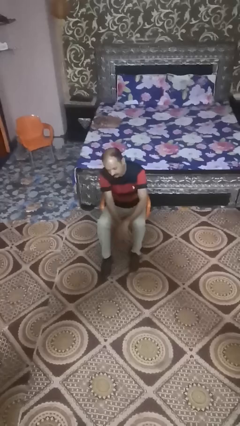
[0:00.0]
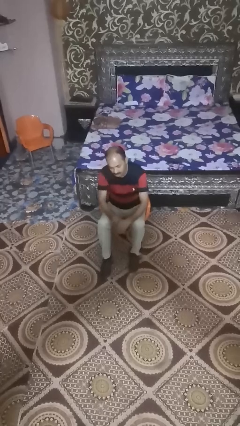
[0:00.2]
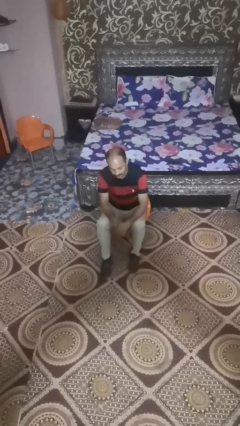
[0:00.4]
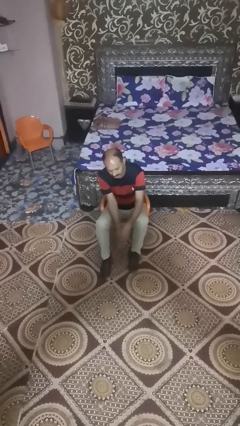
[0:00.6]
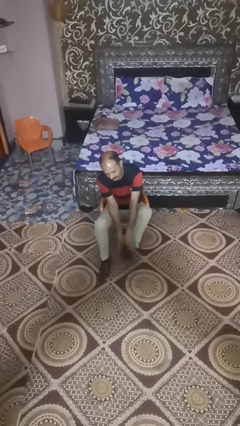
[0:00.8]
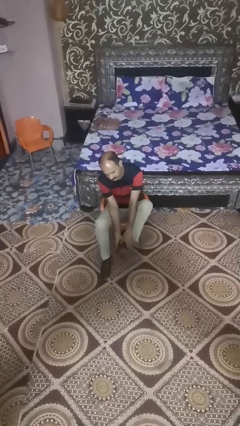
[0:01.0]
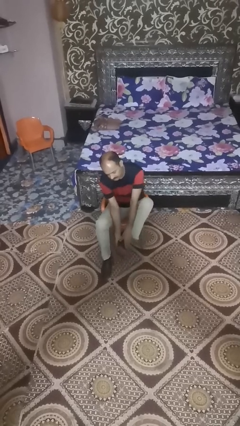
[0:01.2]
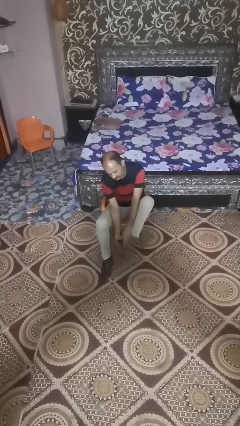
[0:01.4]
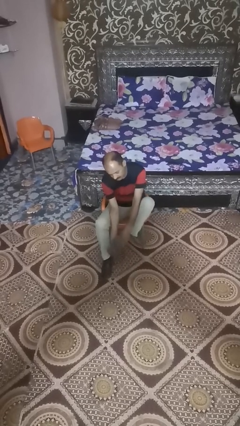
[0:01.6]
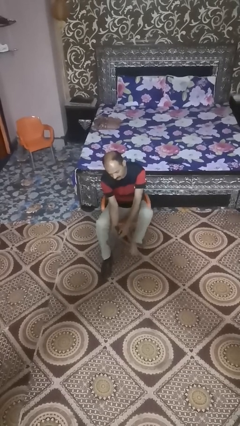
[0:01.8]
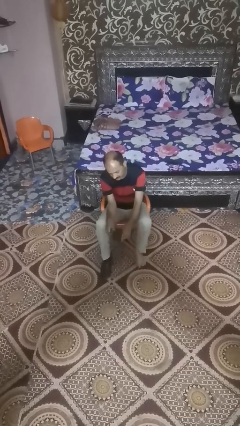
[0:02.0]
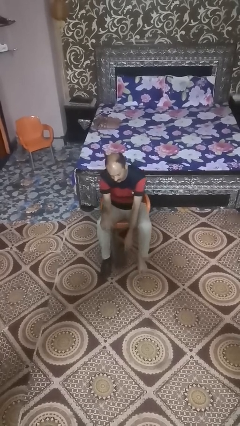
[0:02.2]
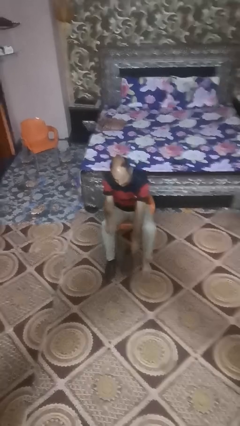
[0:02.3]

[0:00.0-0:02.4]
person takes off boots

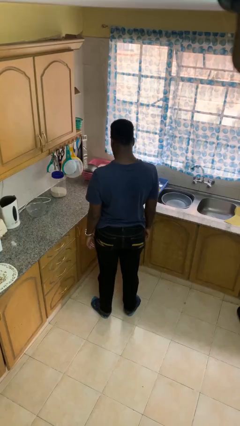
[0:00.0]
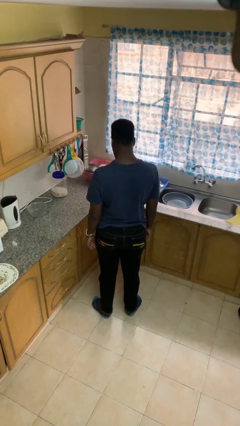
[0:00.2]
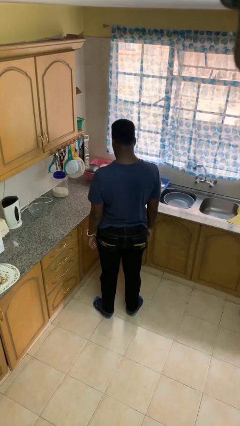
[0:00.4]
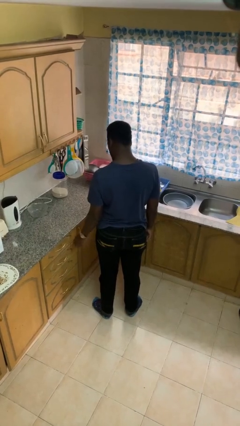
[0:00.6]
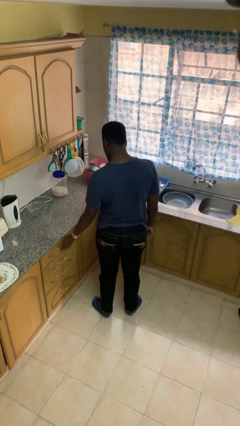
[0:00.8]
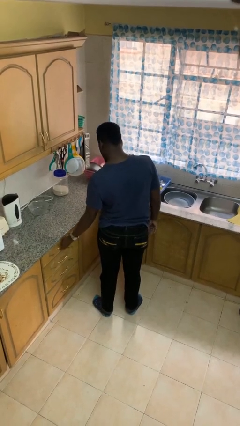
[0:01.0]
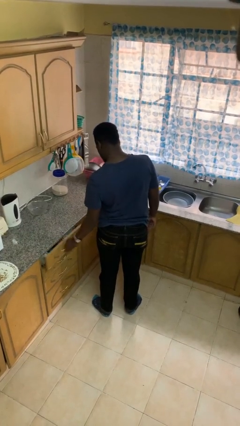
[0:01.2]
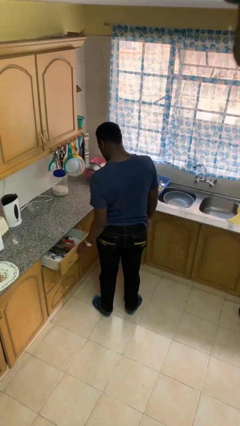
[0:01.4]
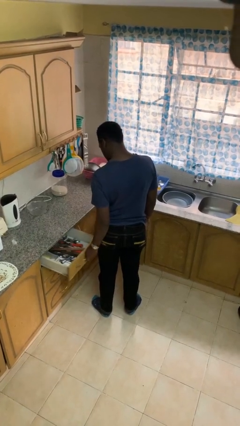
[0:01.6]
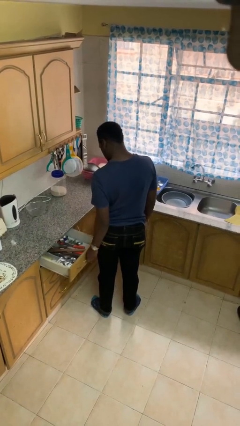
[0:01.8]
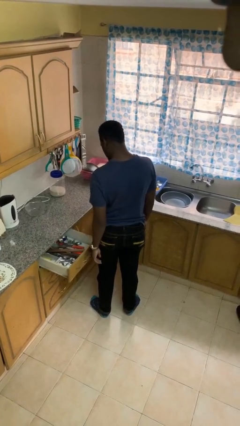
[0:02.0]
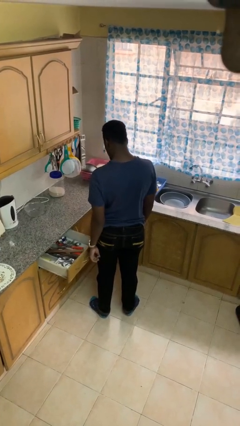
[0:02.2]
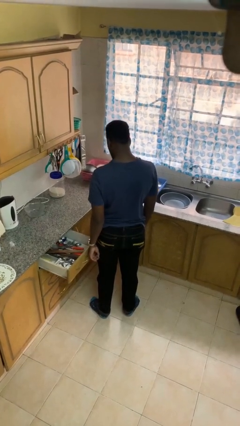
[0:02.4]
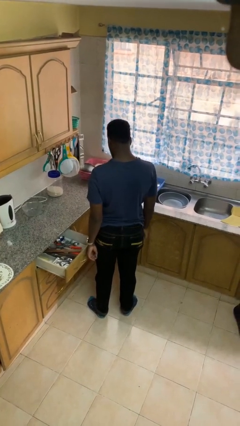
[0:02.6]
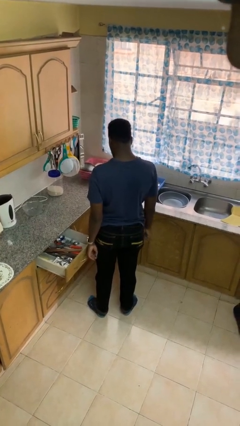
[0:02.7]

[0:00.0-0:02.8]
person opens kitchen drawer

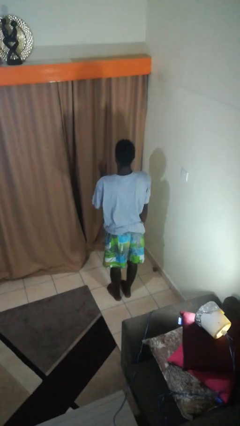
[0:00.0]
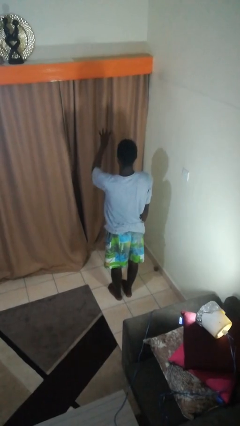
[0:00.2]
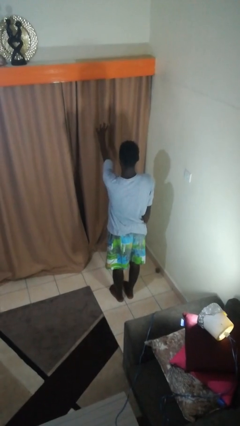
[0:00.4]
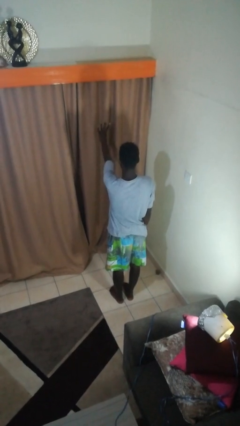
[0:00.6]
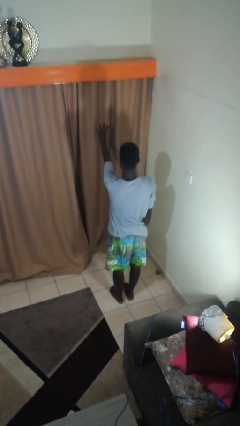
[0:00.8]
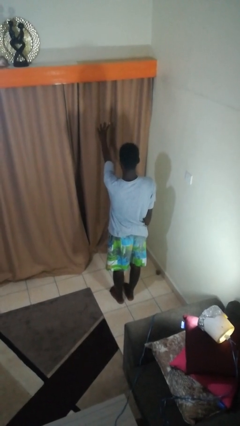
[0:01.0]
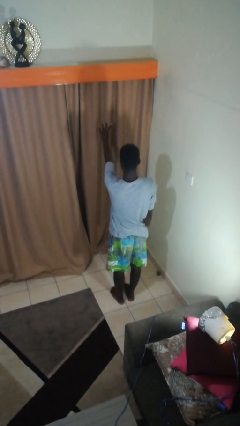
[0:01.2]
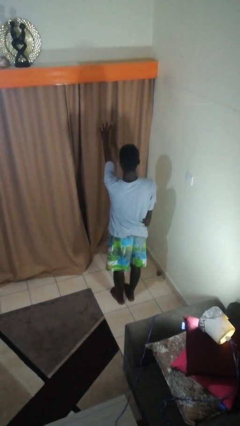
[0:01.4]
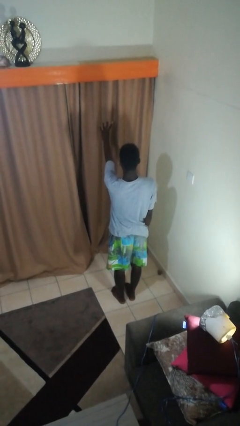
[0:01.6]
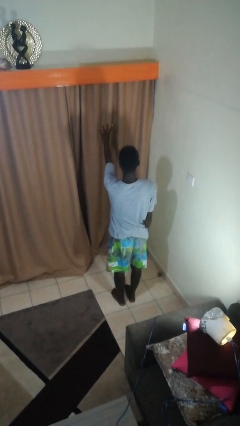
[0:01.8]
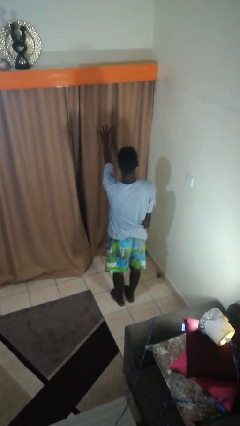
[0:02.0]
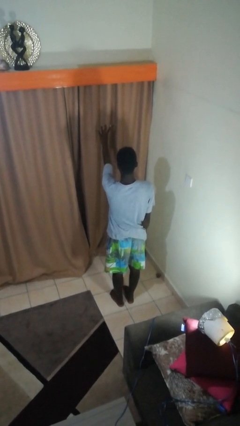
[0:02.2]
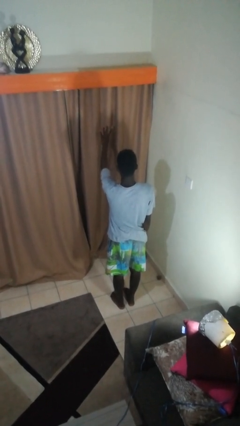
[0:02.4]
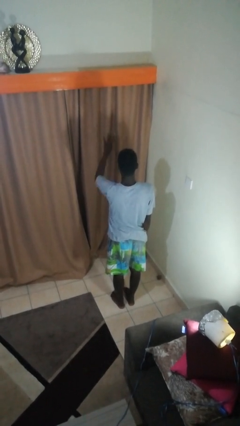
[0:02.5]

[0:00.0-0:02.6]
person gestures number four

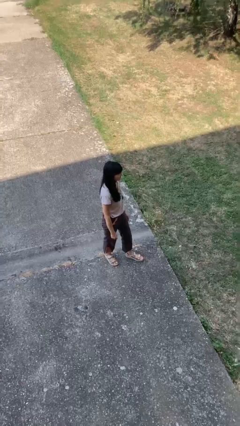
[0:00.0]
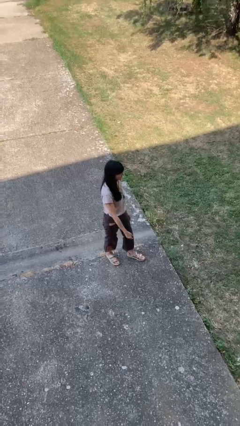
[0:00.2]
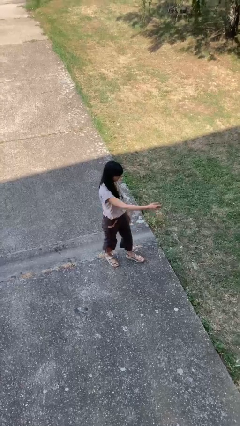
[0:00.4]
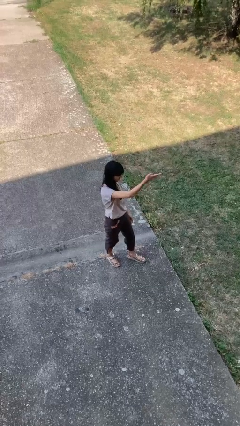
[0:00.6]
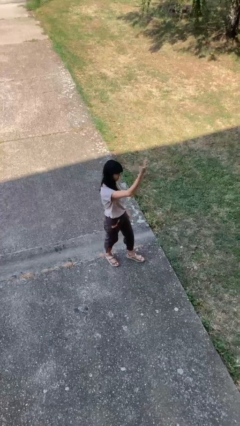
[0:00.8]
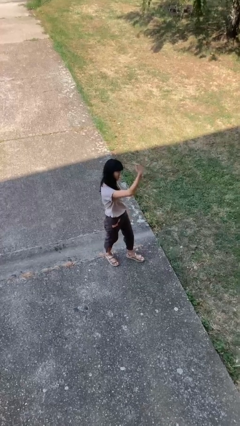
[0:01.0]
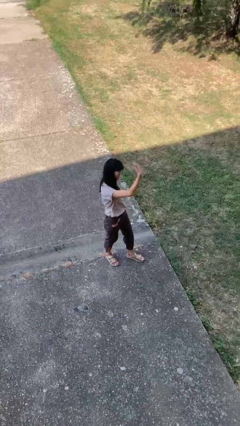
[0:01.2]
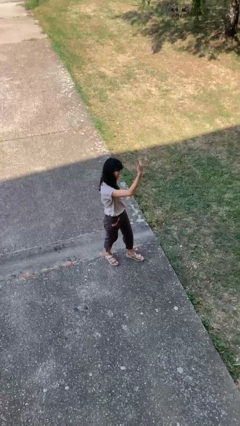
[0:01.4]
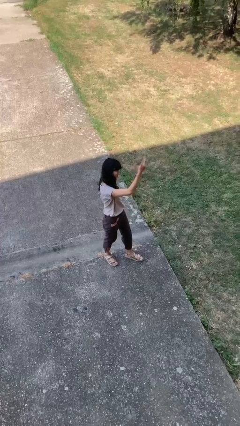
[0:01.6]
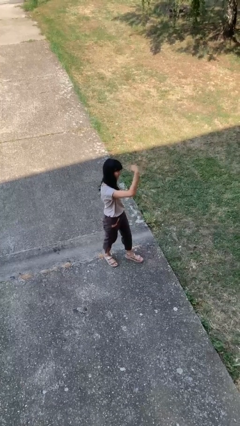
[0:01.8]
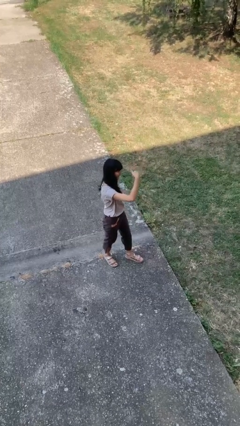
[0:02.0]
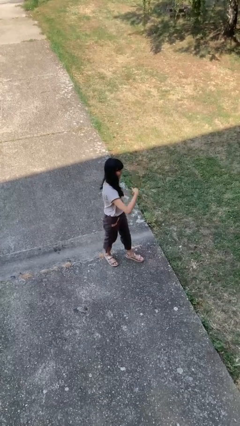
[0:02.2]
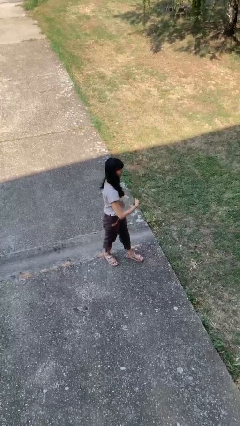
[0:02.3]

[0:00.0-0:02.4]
person gestures come here

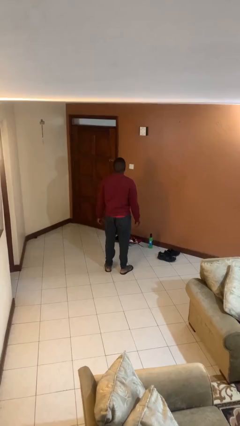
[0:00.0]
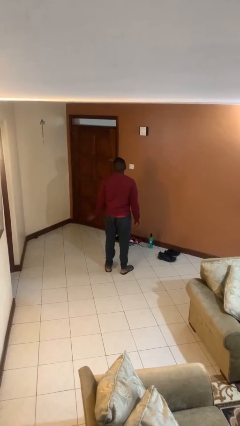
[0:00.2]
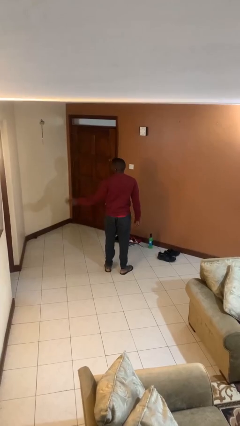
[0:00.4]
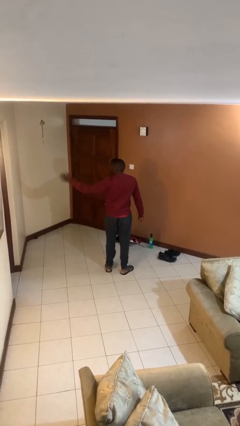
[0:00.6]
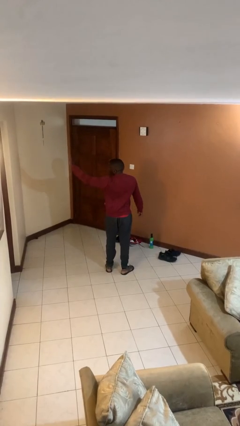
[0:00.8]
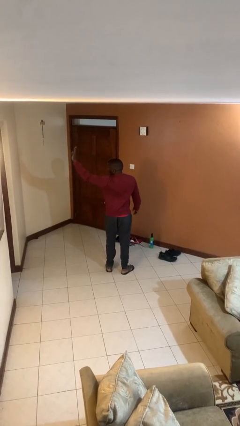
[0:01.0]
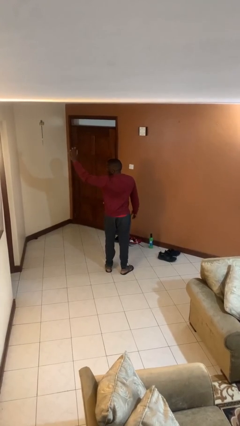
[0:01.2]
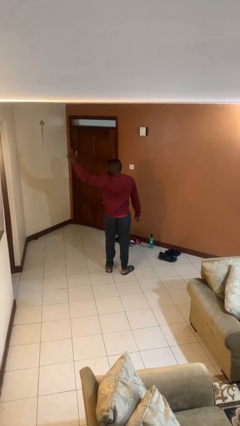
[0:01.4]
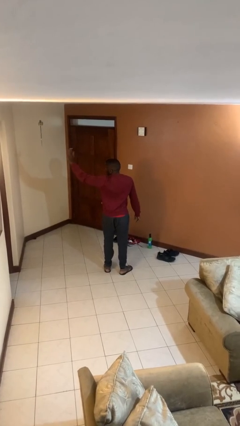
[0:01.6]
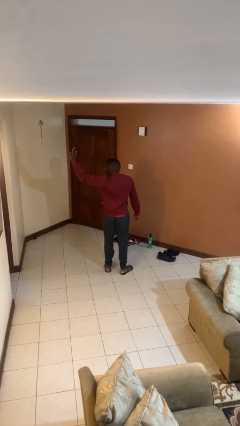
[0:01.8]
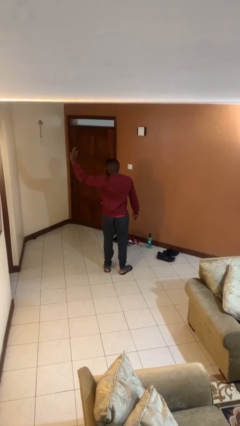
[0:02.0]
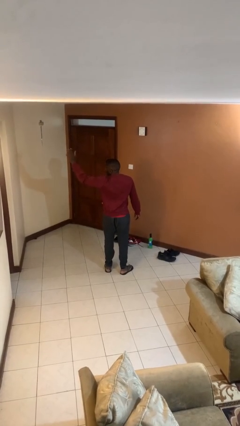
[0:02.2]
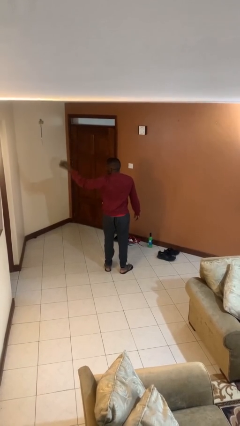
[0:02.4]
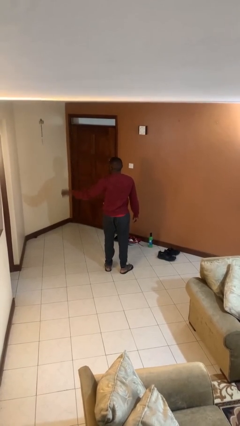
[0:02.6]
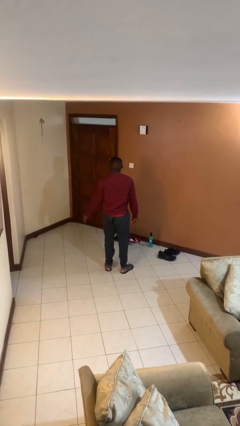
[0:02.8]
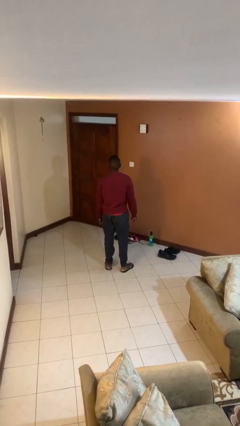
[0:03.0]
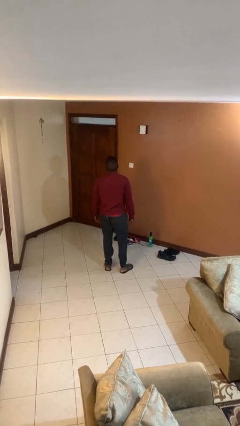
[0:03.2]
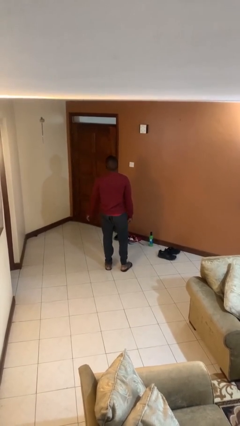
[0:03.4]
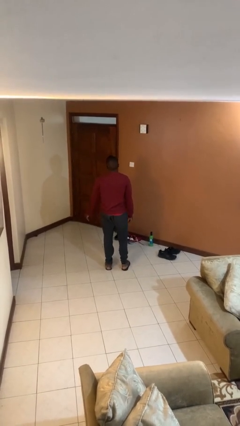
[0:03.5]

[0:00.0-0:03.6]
person waves at person

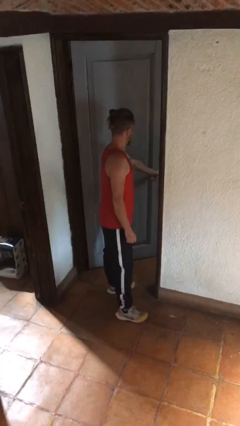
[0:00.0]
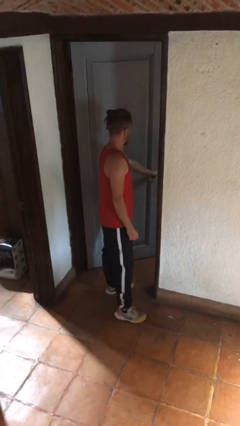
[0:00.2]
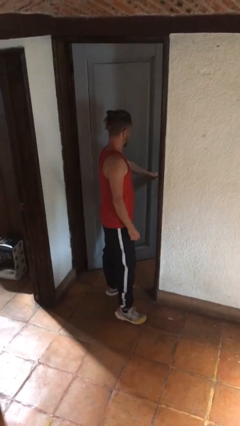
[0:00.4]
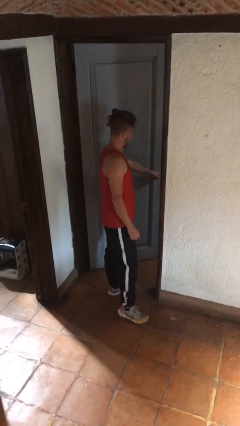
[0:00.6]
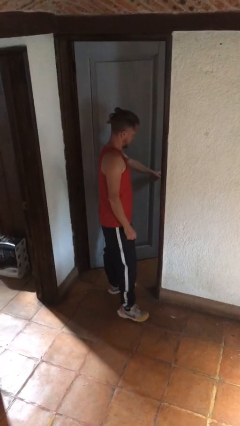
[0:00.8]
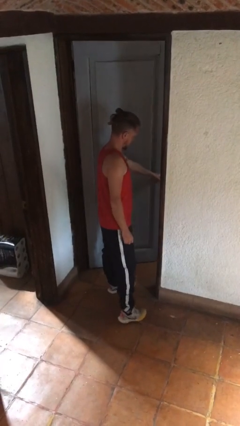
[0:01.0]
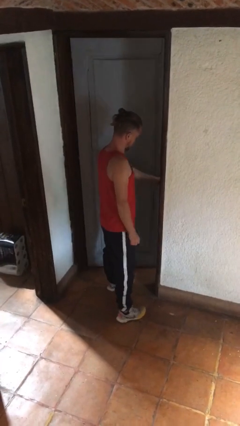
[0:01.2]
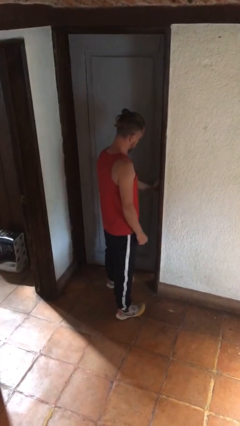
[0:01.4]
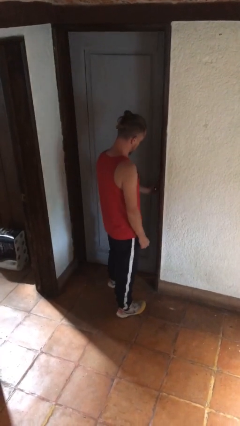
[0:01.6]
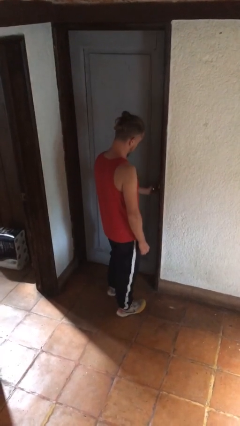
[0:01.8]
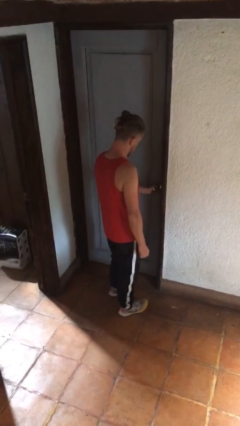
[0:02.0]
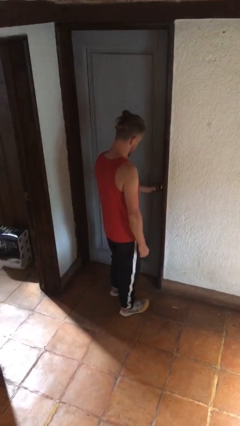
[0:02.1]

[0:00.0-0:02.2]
person closes facility door

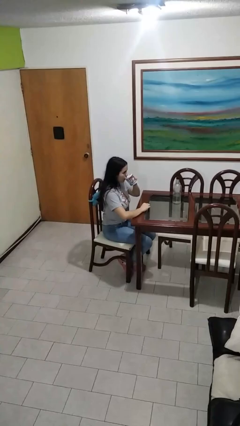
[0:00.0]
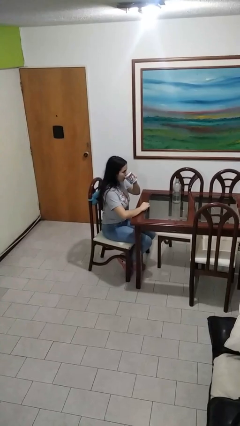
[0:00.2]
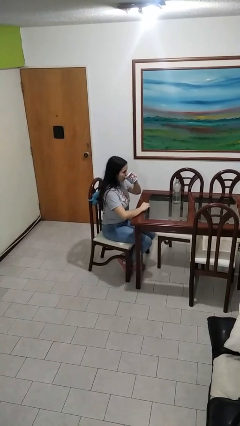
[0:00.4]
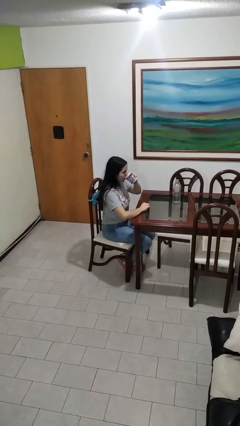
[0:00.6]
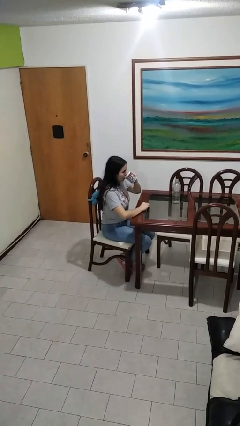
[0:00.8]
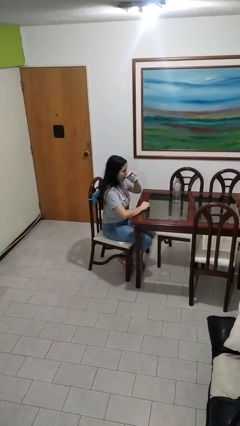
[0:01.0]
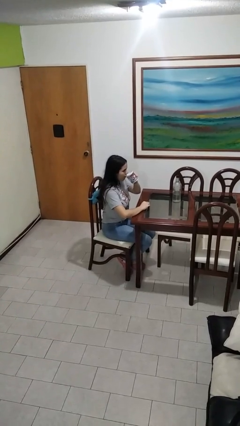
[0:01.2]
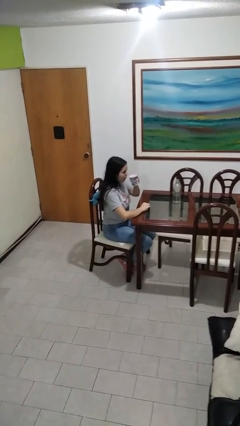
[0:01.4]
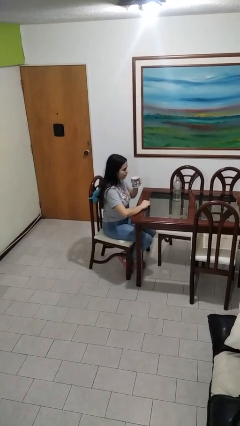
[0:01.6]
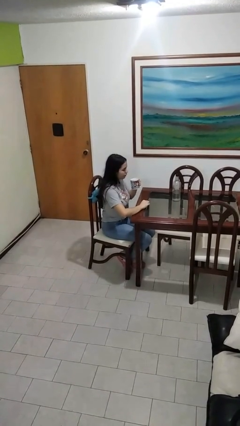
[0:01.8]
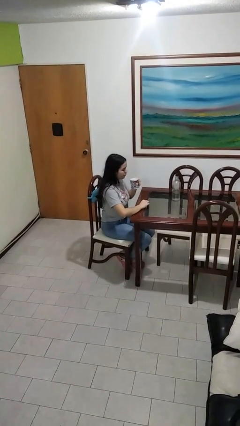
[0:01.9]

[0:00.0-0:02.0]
person drinks from mug
